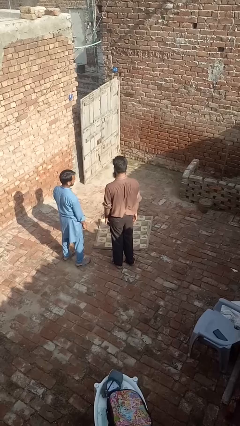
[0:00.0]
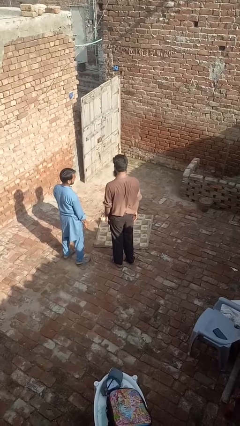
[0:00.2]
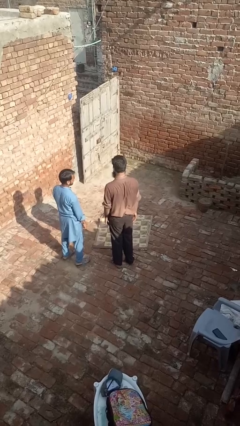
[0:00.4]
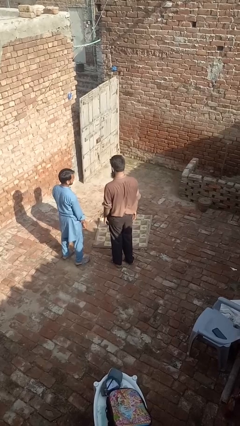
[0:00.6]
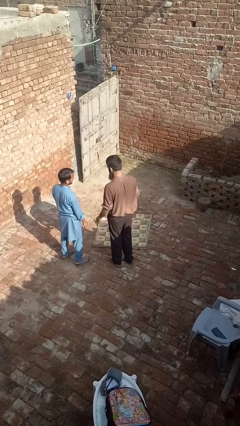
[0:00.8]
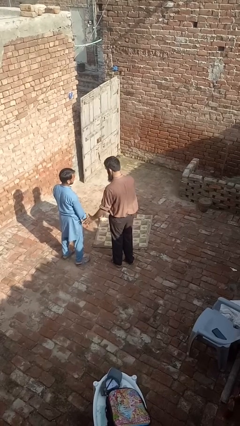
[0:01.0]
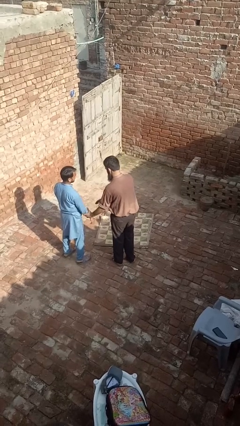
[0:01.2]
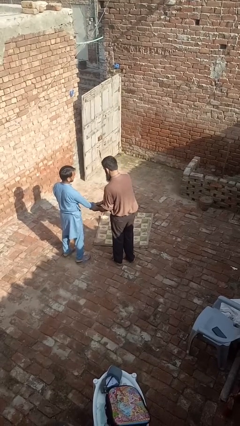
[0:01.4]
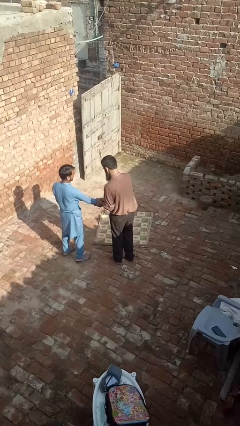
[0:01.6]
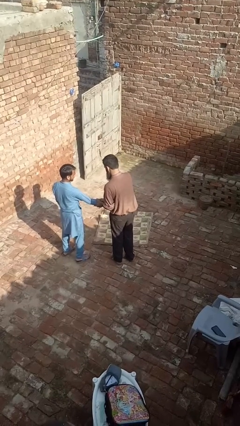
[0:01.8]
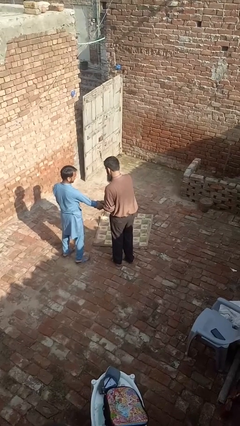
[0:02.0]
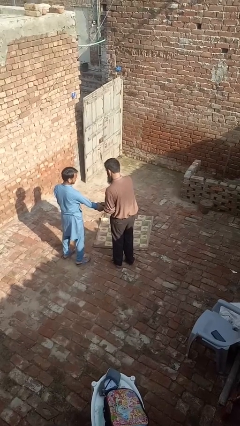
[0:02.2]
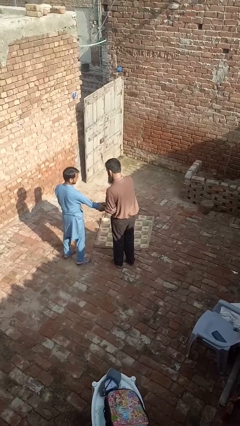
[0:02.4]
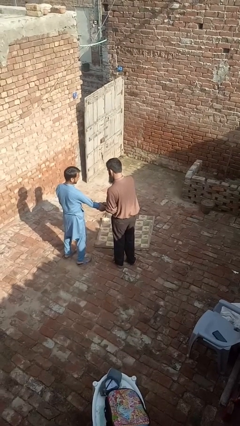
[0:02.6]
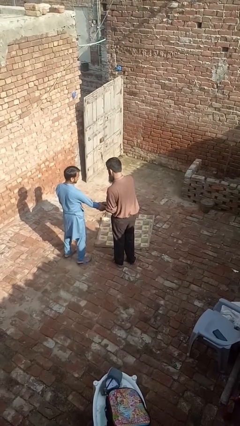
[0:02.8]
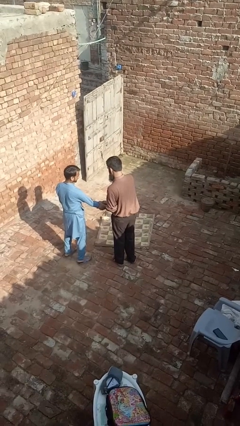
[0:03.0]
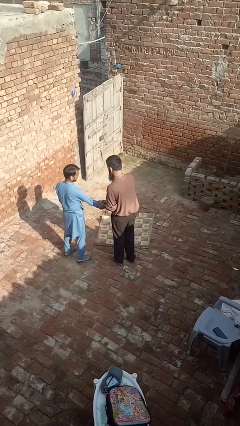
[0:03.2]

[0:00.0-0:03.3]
person grabs person by forearm

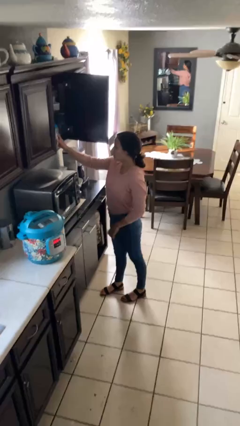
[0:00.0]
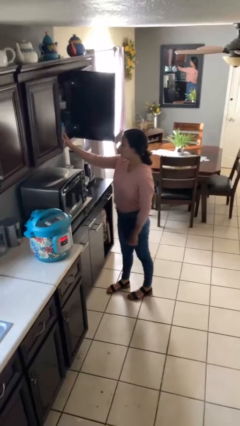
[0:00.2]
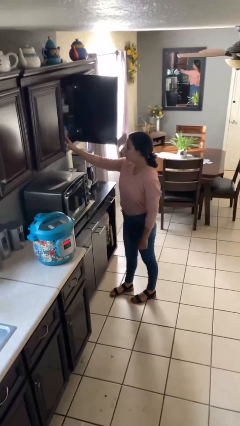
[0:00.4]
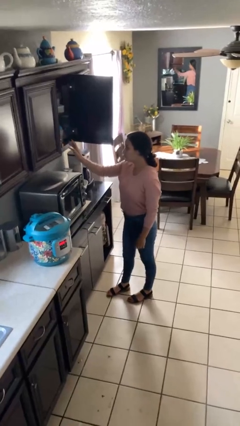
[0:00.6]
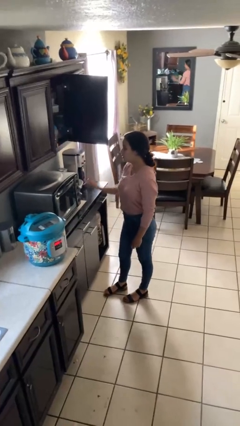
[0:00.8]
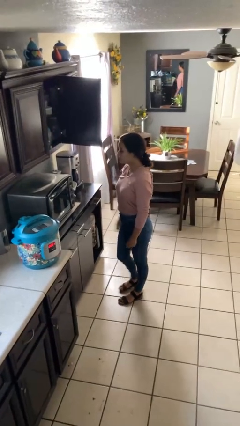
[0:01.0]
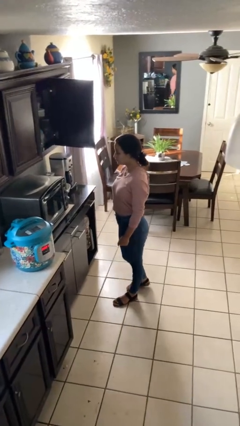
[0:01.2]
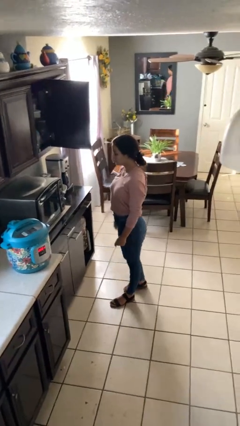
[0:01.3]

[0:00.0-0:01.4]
person puts down object into cabinet

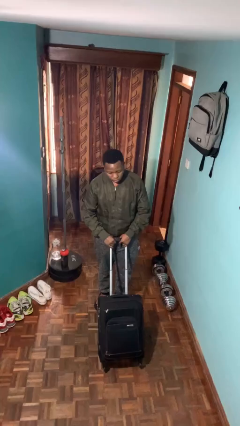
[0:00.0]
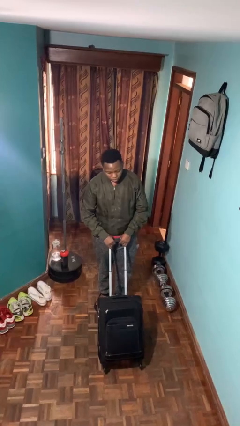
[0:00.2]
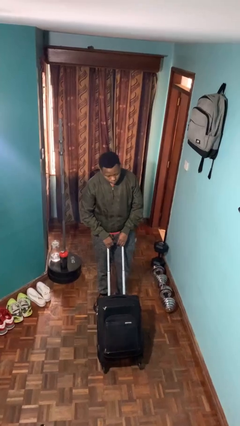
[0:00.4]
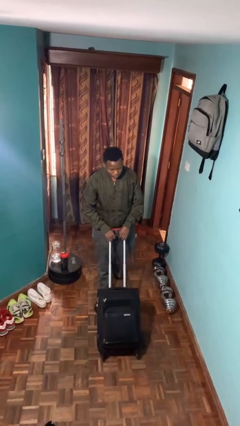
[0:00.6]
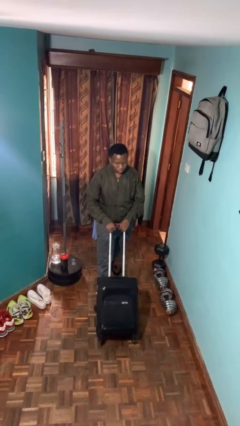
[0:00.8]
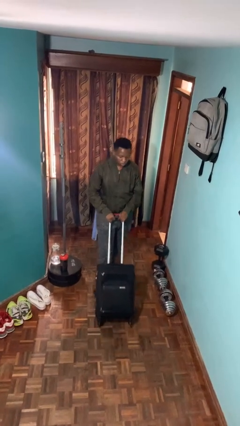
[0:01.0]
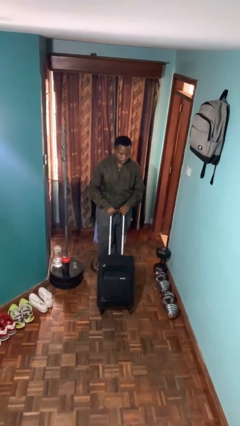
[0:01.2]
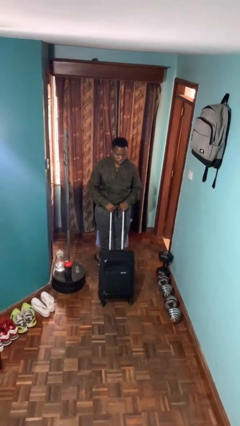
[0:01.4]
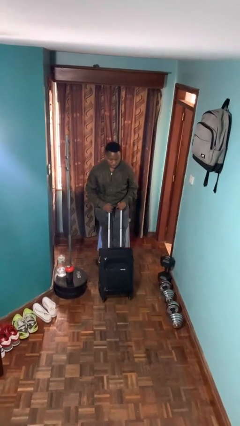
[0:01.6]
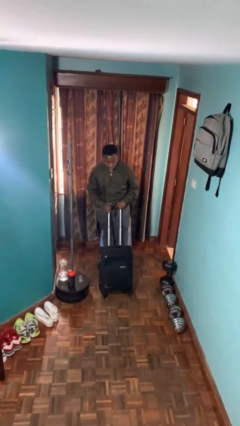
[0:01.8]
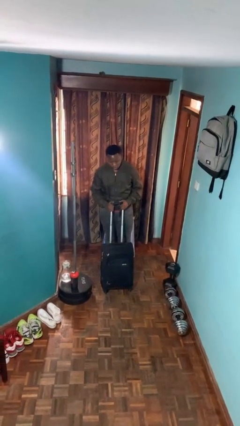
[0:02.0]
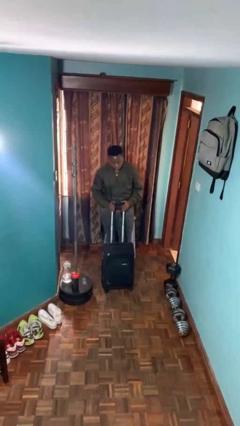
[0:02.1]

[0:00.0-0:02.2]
person pulls wheeled cart

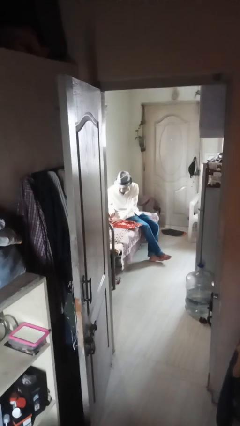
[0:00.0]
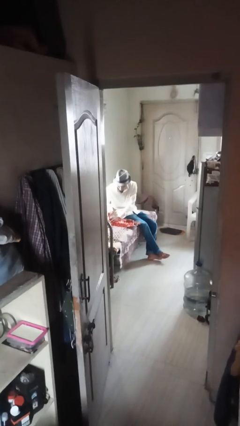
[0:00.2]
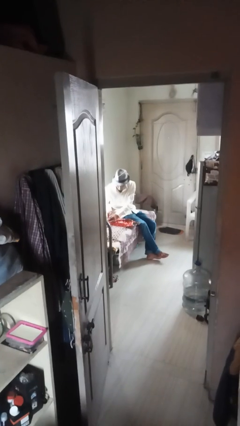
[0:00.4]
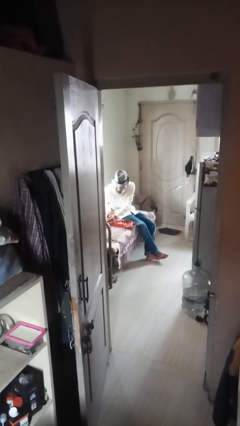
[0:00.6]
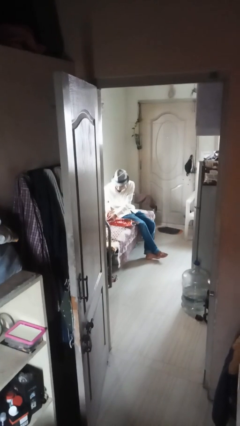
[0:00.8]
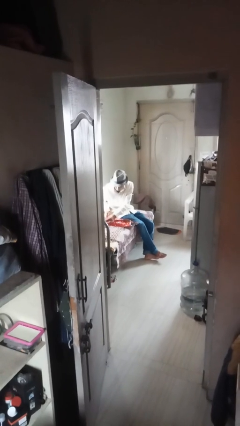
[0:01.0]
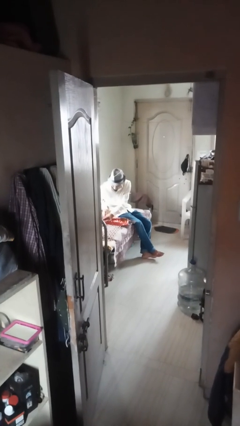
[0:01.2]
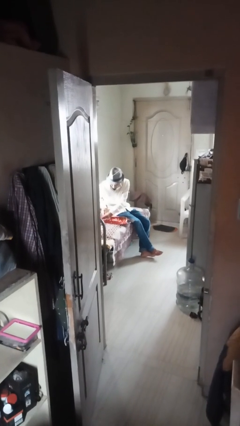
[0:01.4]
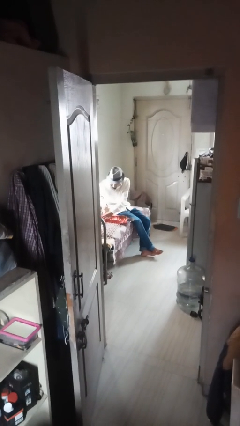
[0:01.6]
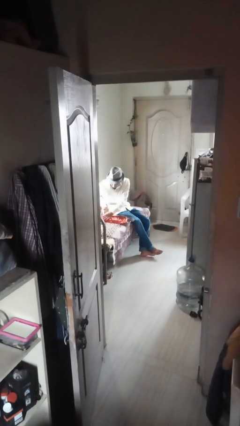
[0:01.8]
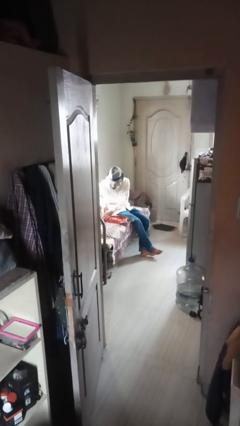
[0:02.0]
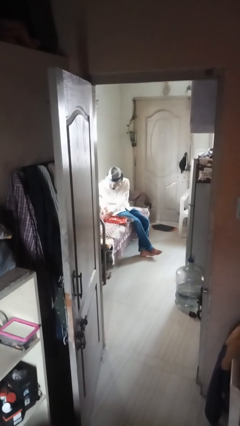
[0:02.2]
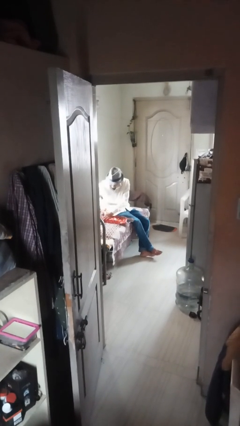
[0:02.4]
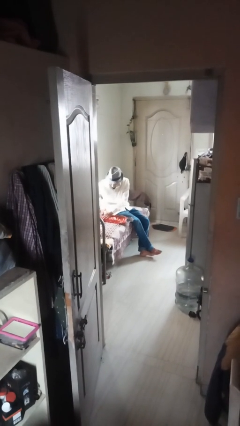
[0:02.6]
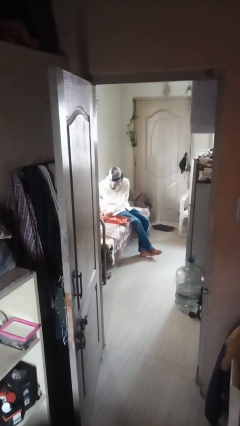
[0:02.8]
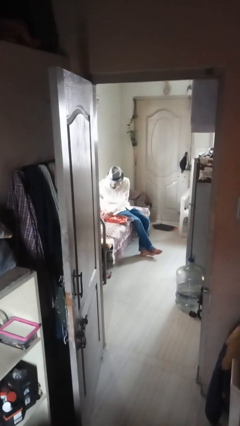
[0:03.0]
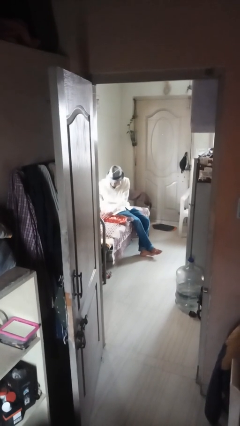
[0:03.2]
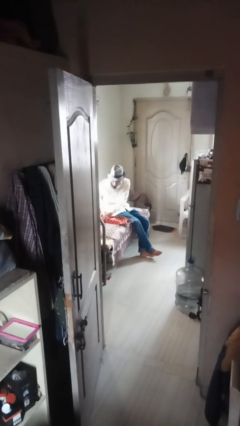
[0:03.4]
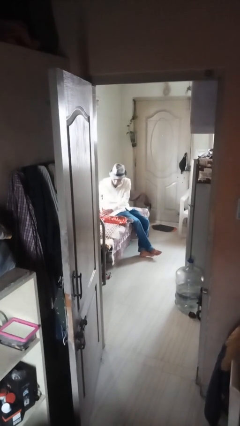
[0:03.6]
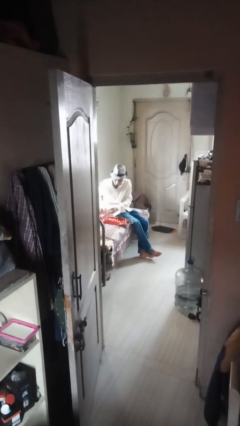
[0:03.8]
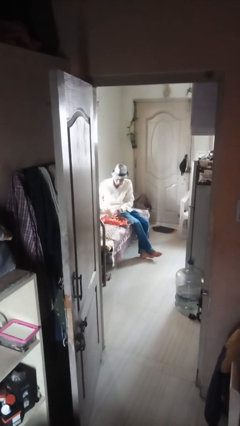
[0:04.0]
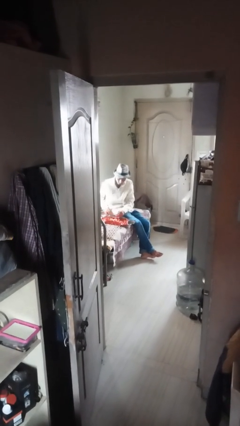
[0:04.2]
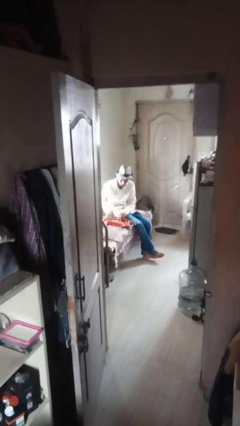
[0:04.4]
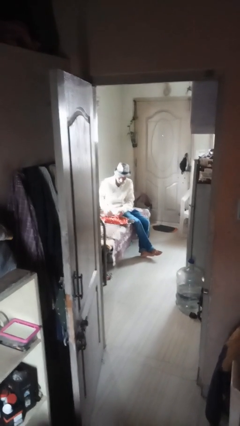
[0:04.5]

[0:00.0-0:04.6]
person wraps box

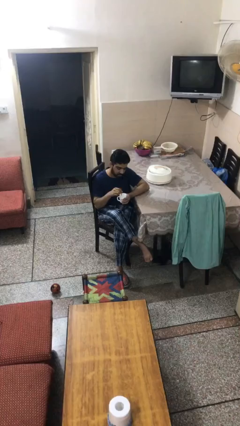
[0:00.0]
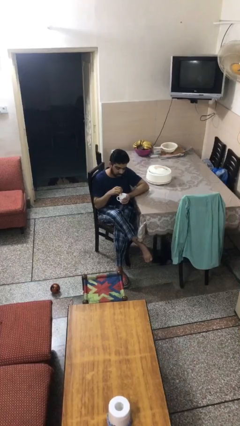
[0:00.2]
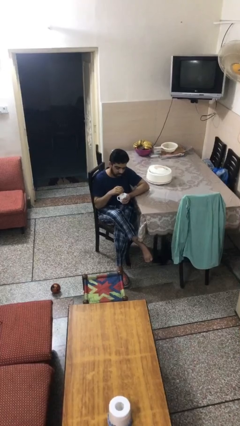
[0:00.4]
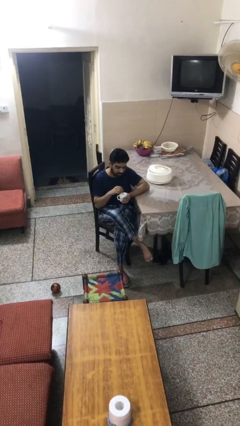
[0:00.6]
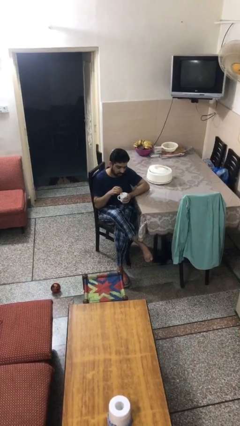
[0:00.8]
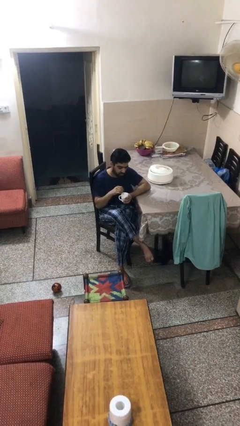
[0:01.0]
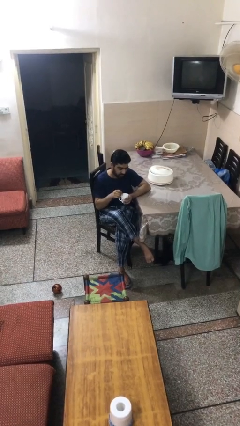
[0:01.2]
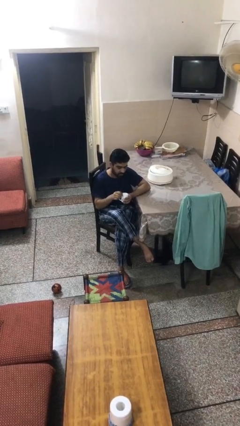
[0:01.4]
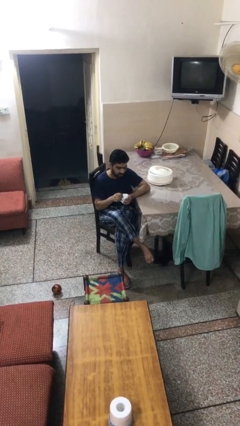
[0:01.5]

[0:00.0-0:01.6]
person stirs mug

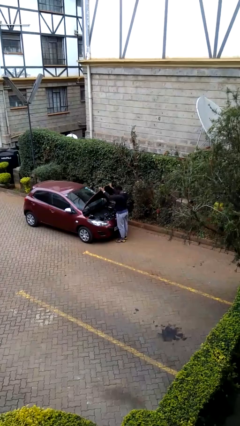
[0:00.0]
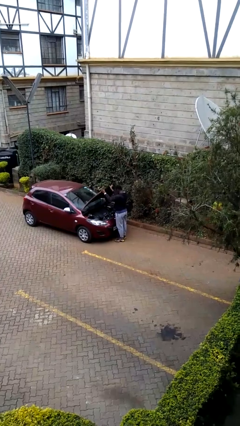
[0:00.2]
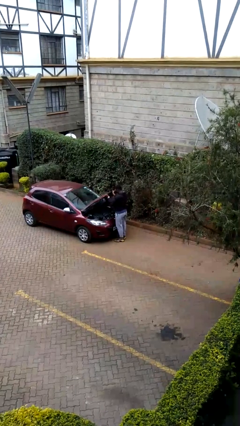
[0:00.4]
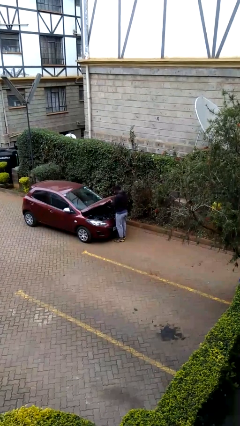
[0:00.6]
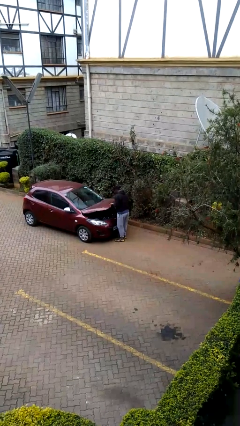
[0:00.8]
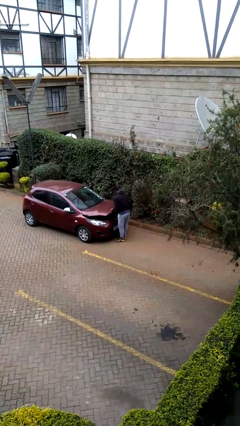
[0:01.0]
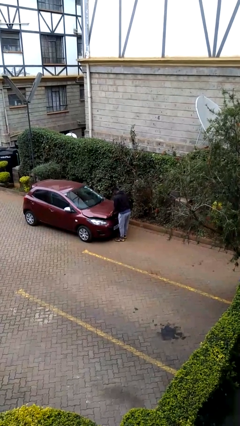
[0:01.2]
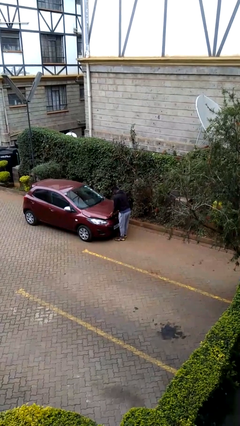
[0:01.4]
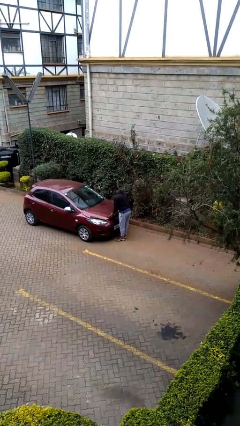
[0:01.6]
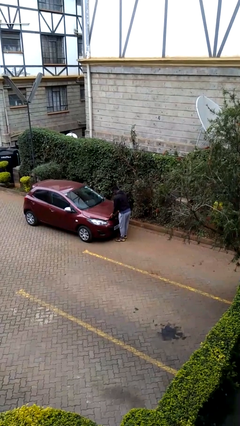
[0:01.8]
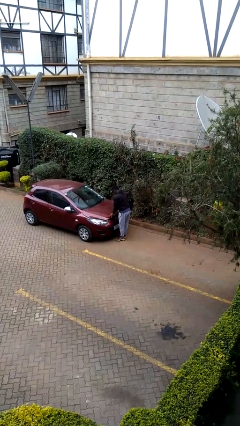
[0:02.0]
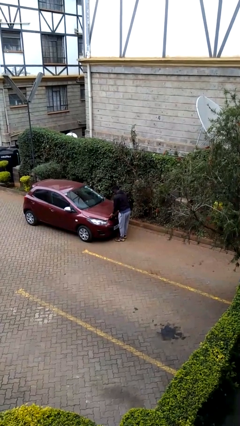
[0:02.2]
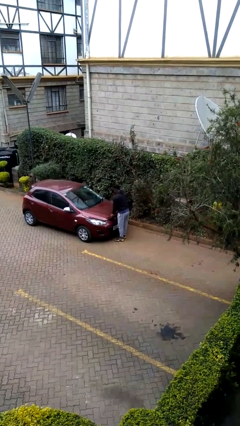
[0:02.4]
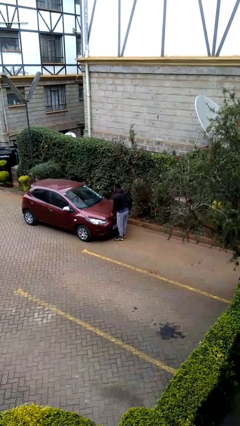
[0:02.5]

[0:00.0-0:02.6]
person closes car hood

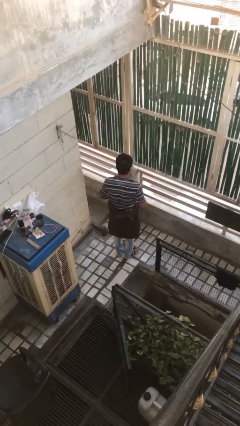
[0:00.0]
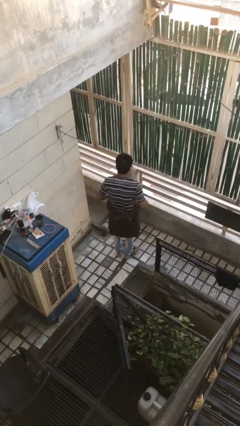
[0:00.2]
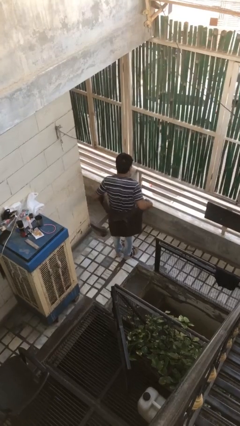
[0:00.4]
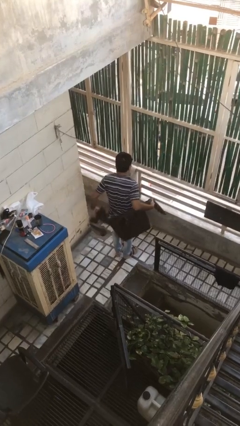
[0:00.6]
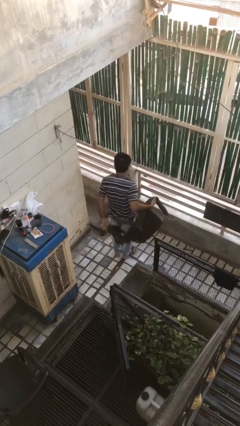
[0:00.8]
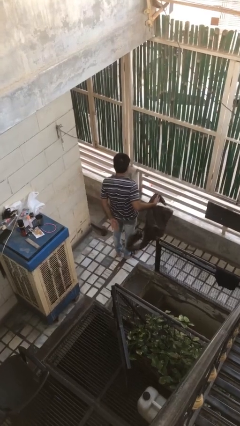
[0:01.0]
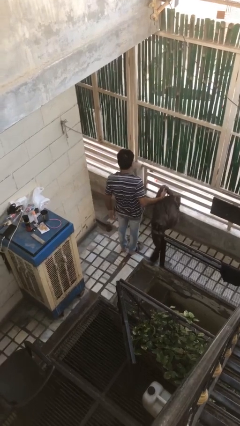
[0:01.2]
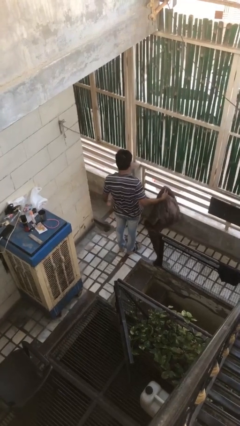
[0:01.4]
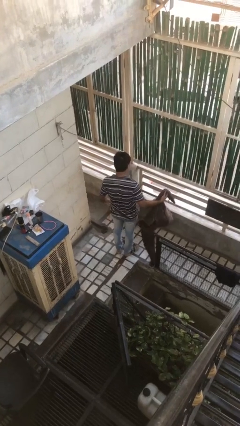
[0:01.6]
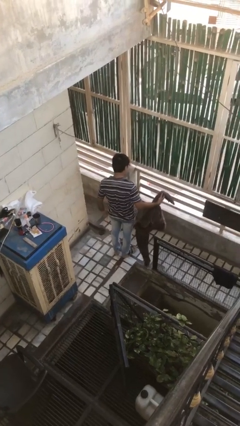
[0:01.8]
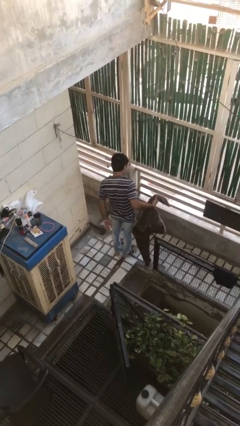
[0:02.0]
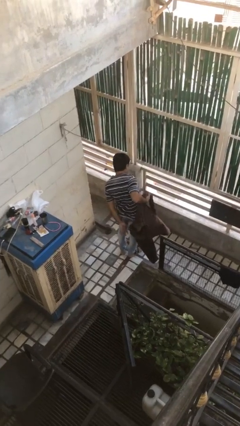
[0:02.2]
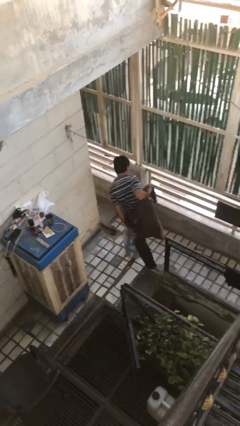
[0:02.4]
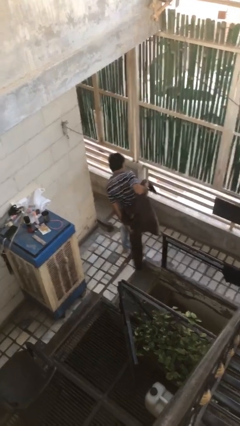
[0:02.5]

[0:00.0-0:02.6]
person unties jacket around waist
